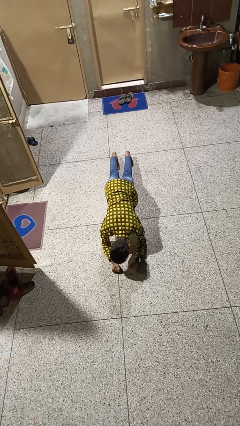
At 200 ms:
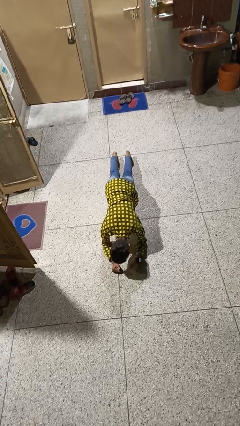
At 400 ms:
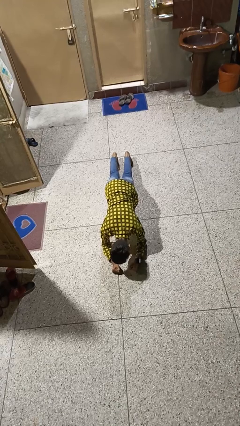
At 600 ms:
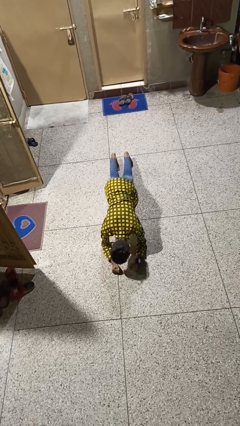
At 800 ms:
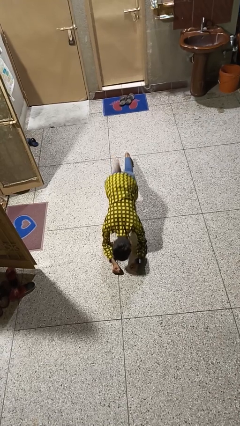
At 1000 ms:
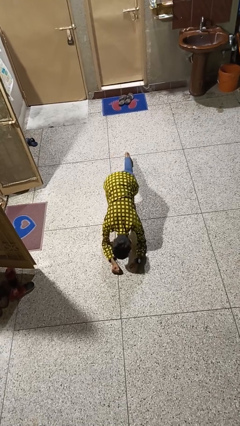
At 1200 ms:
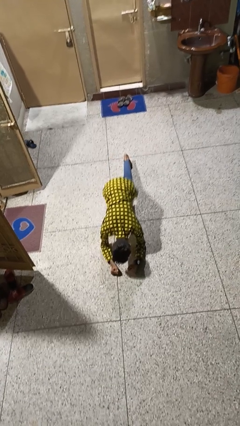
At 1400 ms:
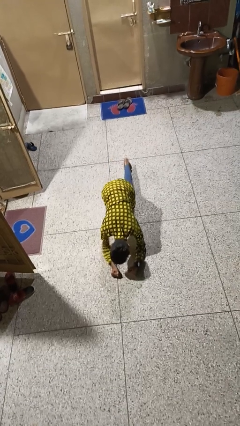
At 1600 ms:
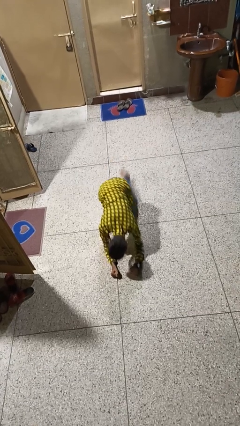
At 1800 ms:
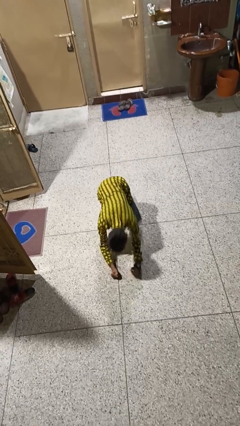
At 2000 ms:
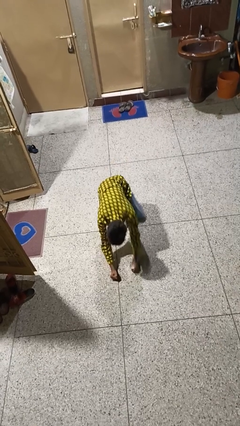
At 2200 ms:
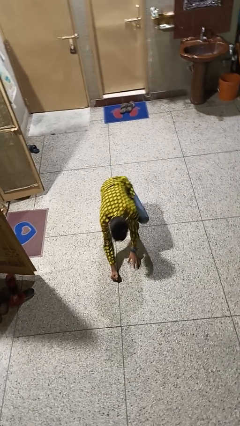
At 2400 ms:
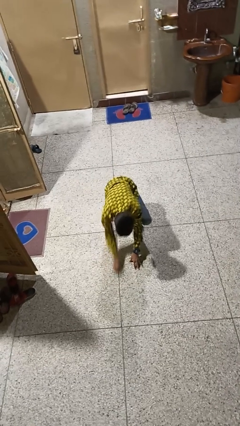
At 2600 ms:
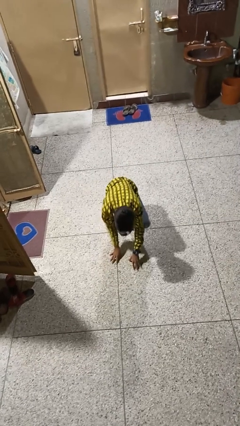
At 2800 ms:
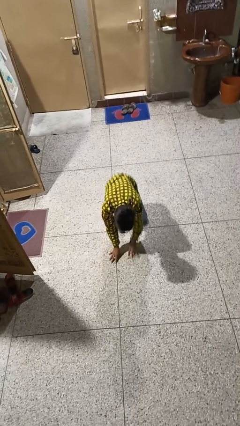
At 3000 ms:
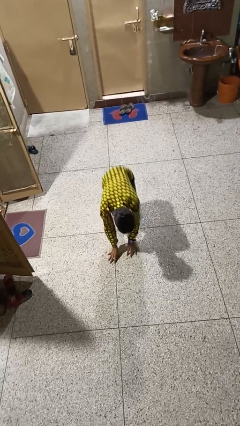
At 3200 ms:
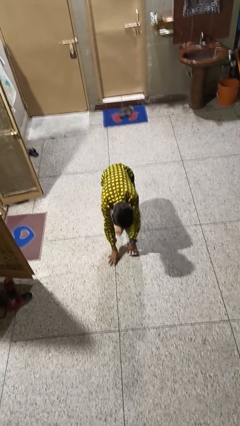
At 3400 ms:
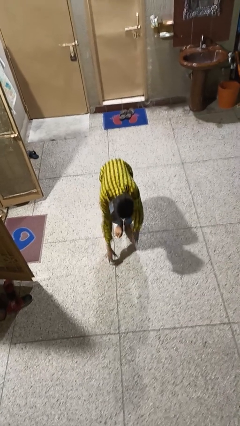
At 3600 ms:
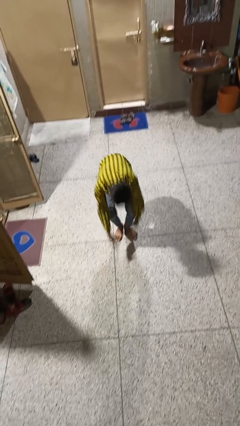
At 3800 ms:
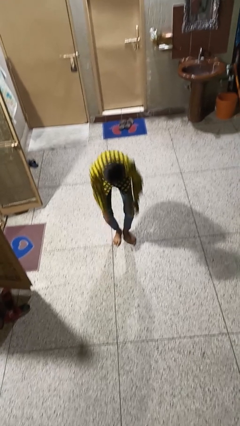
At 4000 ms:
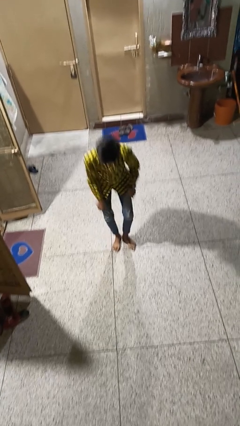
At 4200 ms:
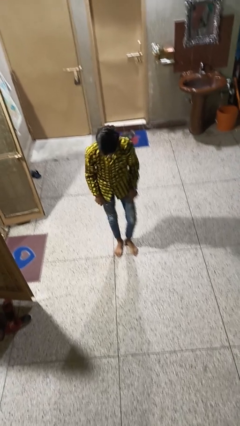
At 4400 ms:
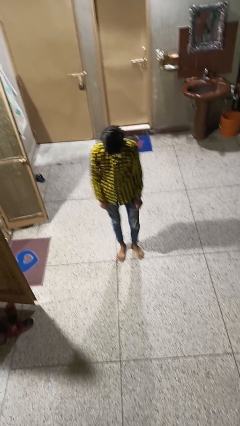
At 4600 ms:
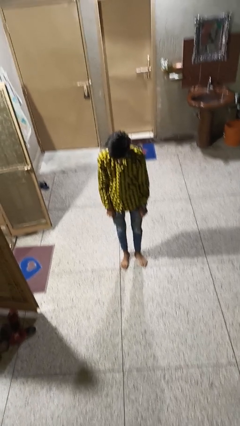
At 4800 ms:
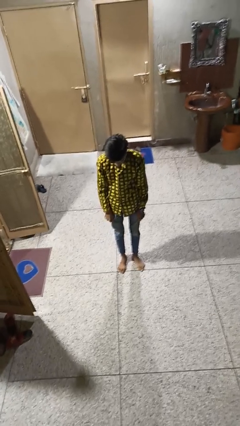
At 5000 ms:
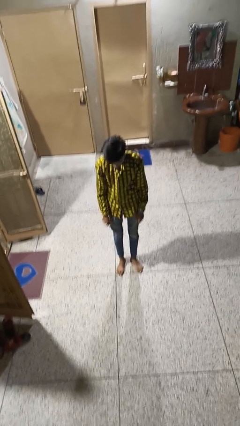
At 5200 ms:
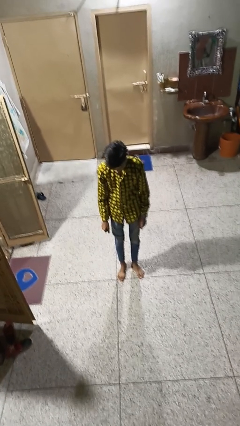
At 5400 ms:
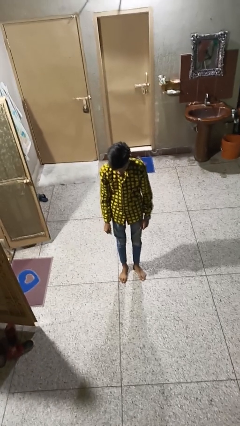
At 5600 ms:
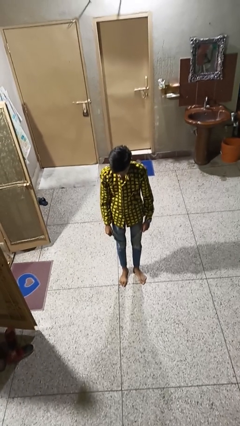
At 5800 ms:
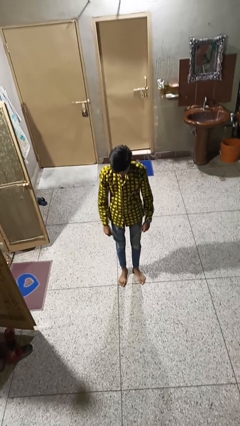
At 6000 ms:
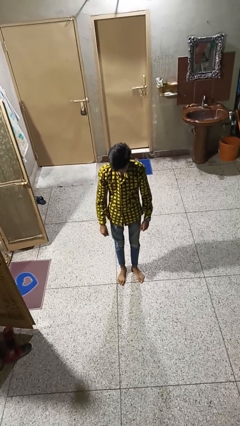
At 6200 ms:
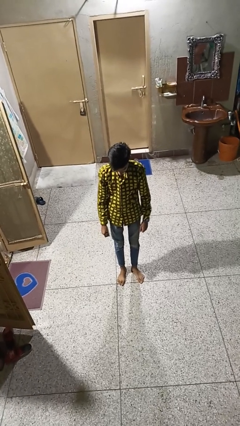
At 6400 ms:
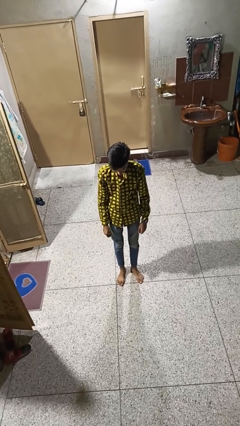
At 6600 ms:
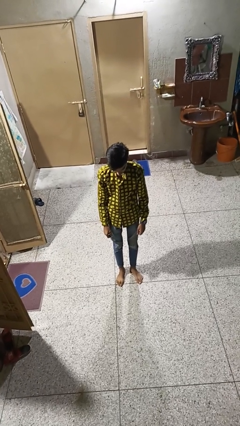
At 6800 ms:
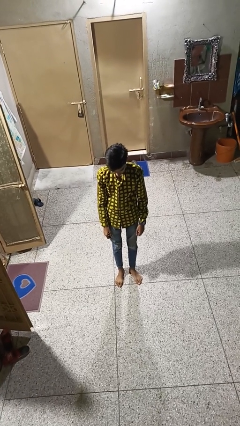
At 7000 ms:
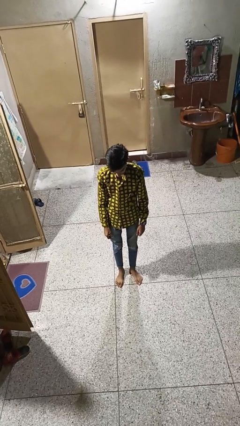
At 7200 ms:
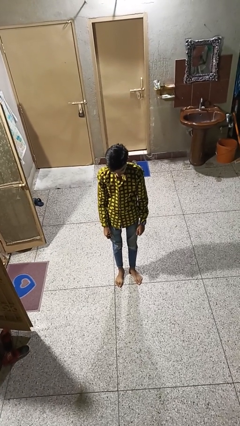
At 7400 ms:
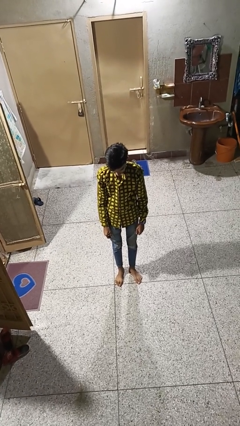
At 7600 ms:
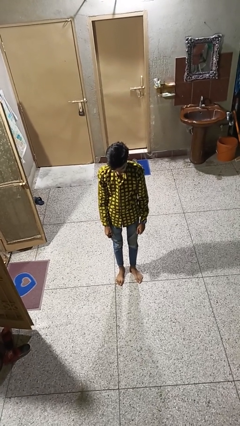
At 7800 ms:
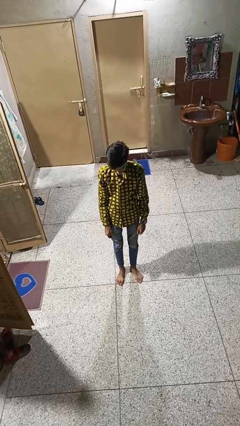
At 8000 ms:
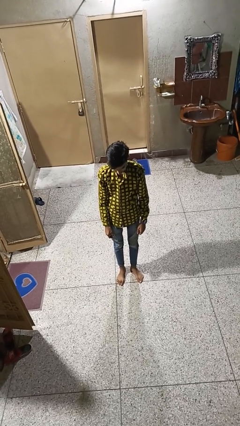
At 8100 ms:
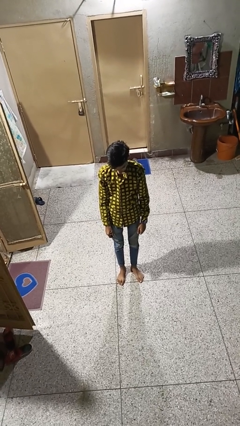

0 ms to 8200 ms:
person stands up from floor

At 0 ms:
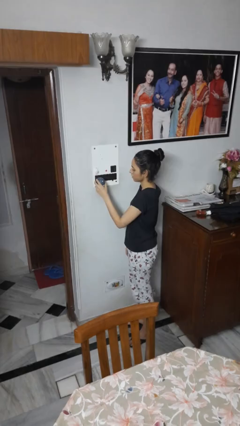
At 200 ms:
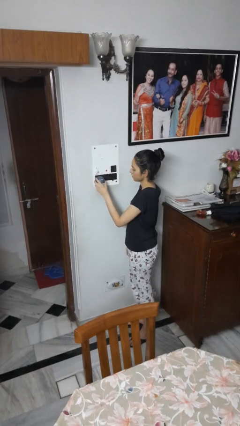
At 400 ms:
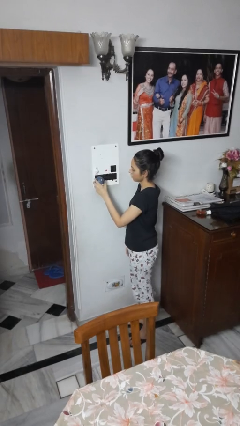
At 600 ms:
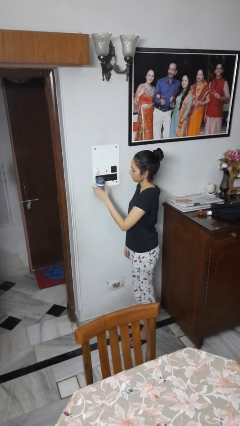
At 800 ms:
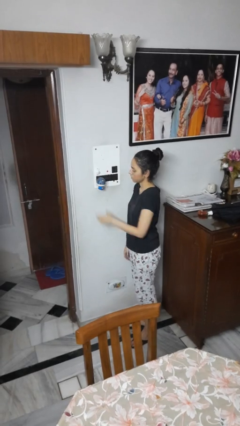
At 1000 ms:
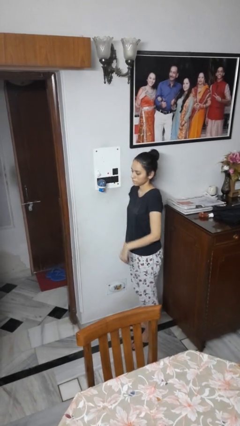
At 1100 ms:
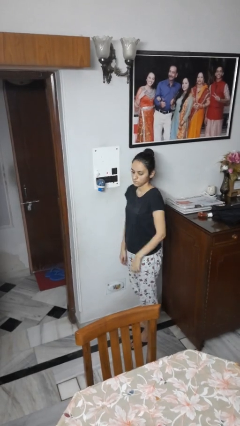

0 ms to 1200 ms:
person plugs into electrical socket

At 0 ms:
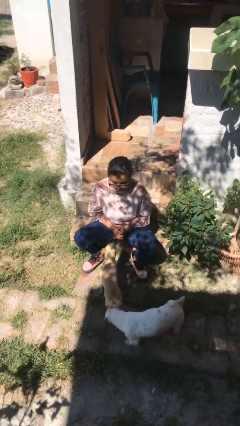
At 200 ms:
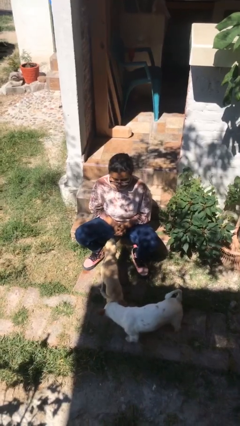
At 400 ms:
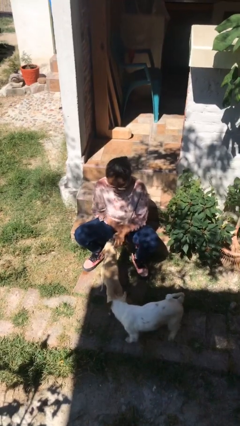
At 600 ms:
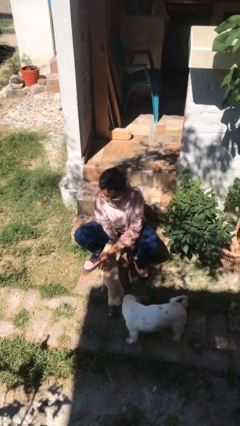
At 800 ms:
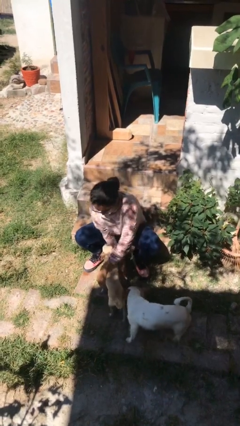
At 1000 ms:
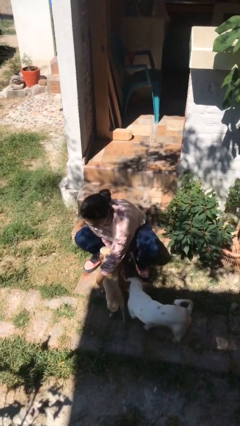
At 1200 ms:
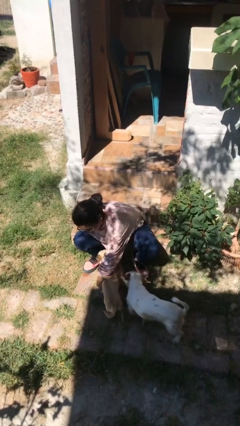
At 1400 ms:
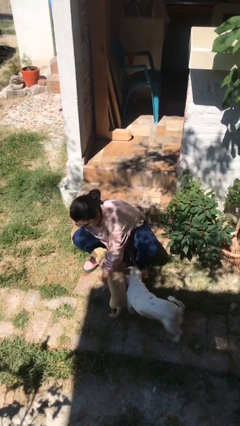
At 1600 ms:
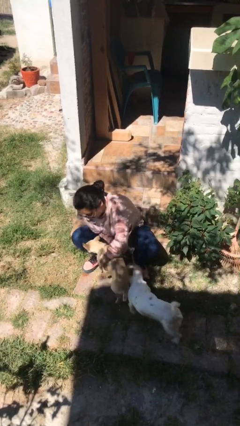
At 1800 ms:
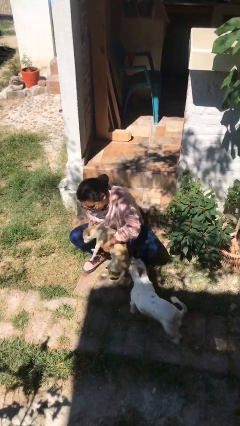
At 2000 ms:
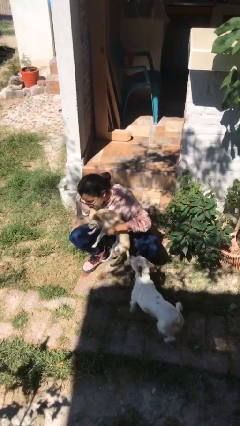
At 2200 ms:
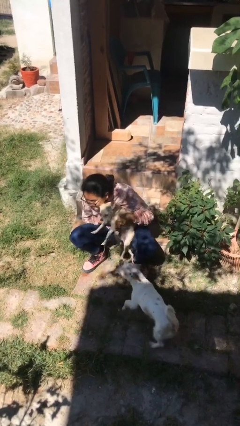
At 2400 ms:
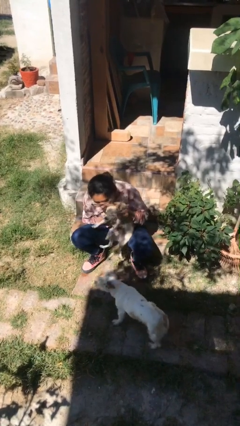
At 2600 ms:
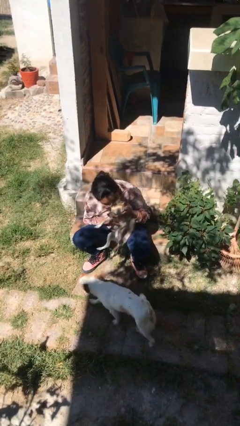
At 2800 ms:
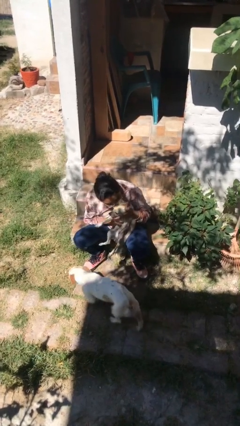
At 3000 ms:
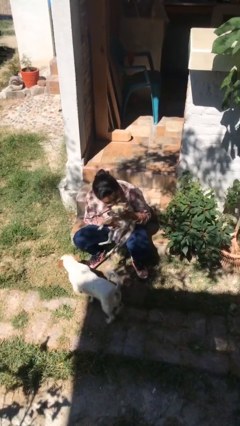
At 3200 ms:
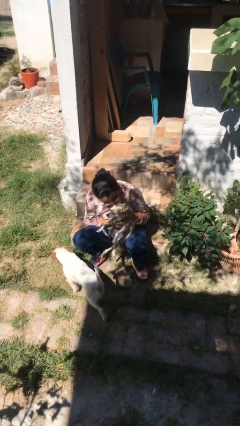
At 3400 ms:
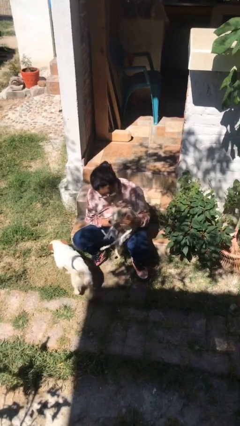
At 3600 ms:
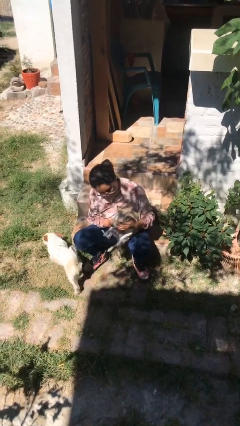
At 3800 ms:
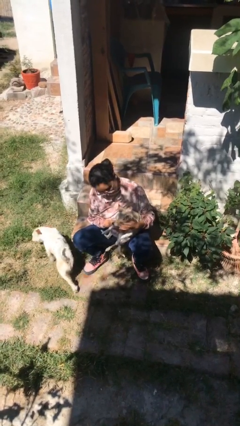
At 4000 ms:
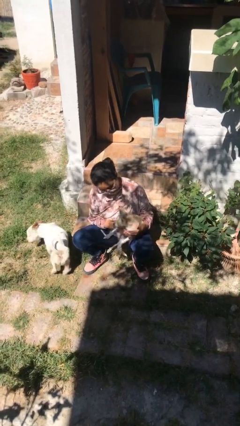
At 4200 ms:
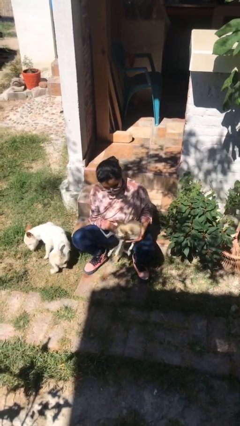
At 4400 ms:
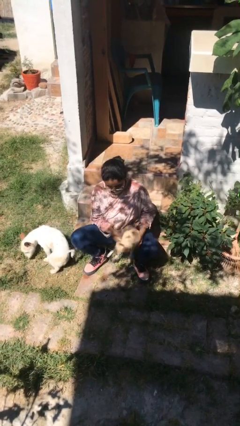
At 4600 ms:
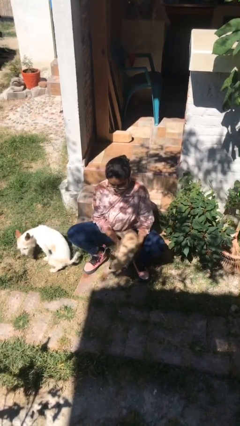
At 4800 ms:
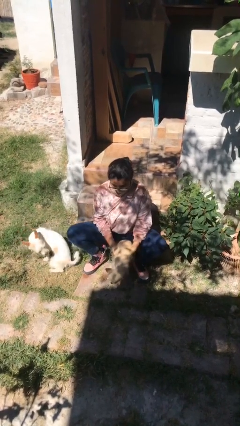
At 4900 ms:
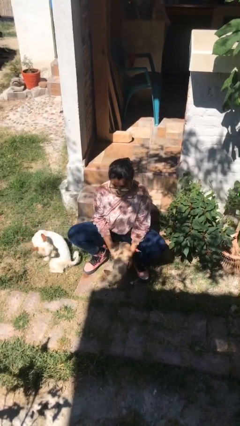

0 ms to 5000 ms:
person hugs dog

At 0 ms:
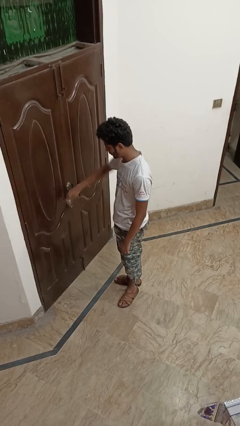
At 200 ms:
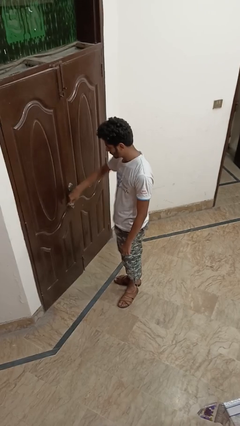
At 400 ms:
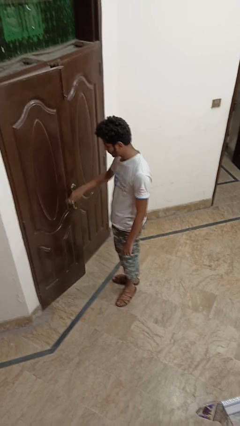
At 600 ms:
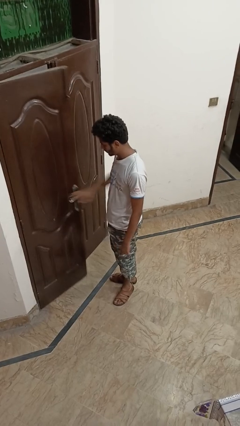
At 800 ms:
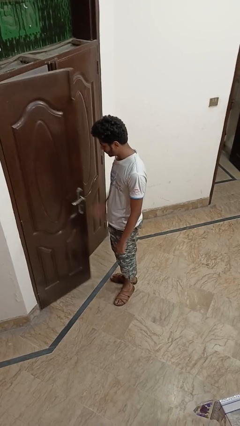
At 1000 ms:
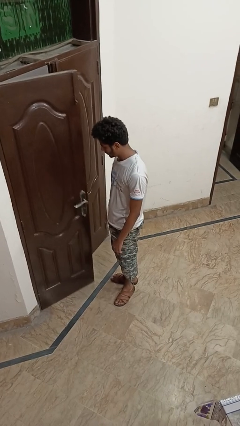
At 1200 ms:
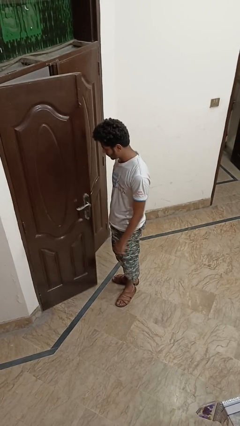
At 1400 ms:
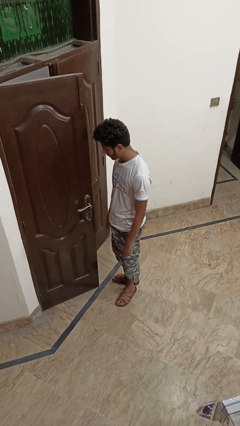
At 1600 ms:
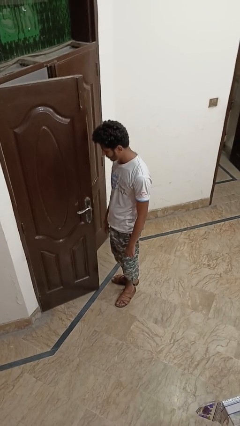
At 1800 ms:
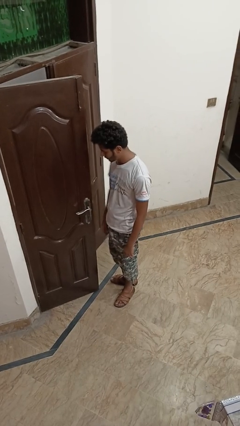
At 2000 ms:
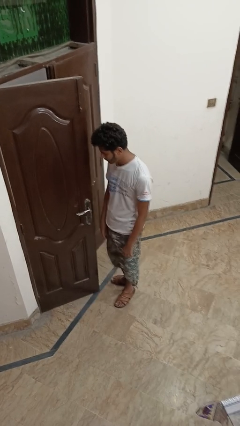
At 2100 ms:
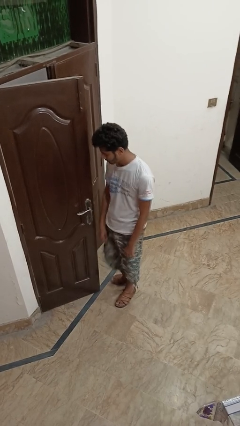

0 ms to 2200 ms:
person opens facility door

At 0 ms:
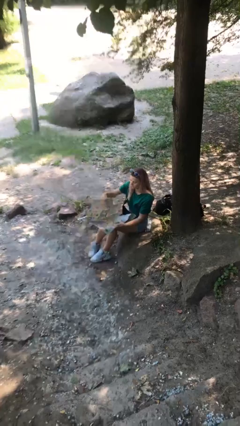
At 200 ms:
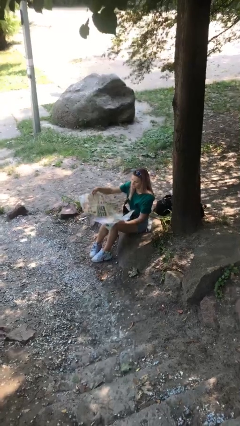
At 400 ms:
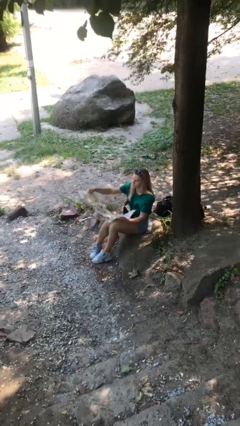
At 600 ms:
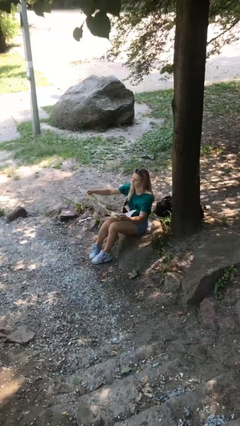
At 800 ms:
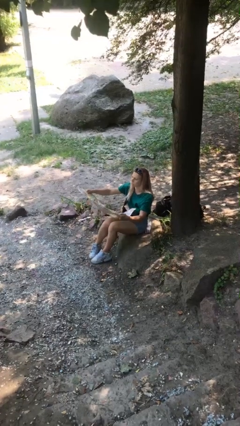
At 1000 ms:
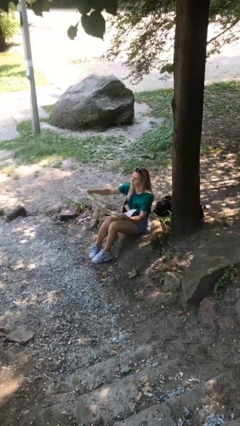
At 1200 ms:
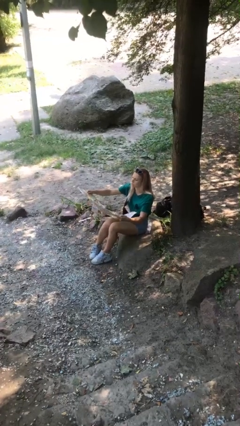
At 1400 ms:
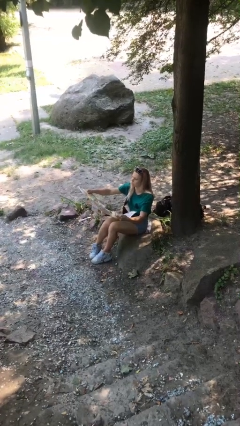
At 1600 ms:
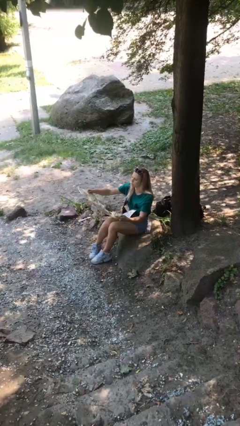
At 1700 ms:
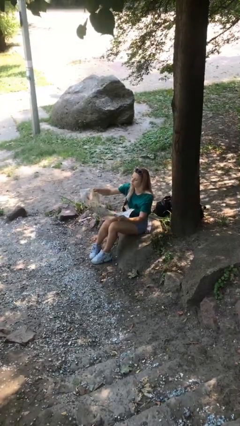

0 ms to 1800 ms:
person reads newspaper
